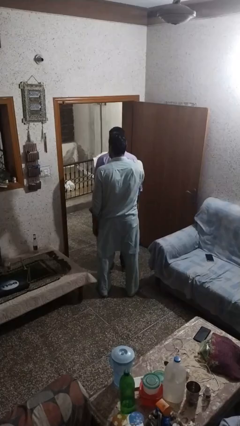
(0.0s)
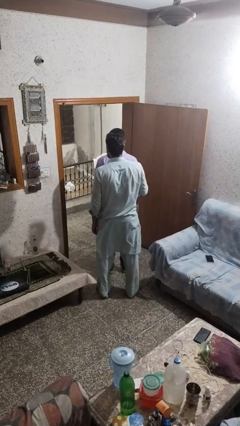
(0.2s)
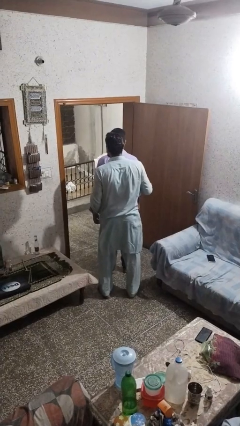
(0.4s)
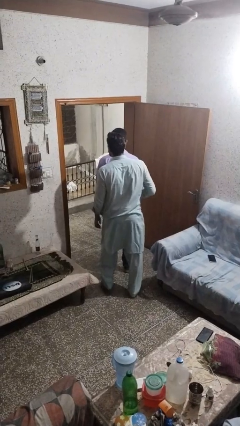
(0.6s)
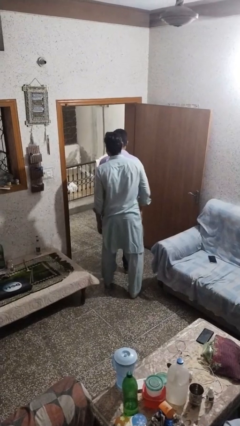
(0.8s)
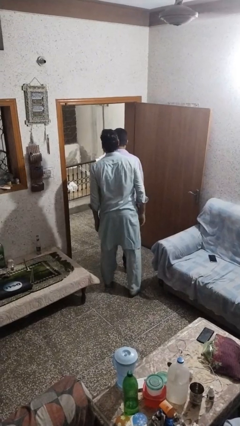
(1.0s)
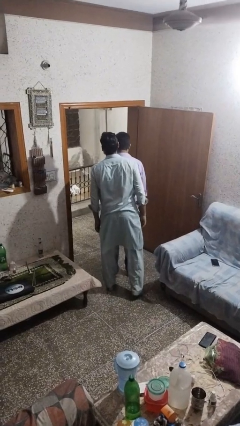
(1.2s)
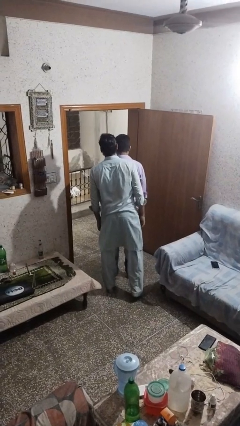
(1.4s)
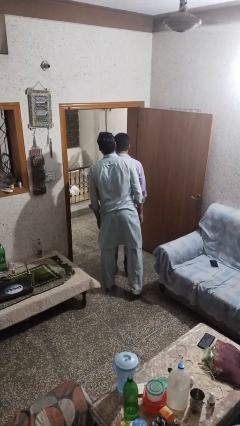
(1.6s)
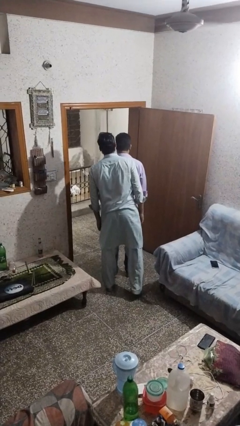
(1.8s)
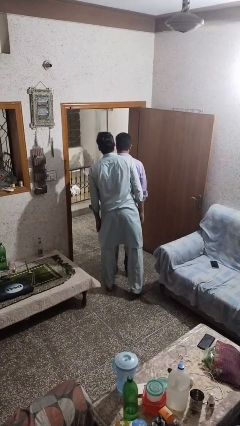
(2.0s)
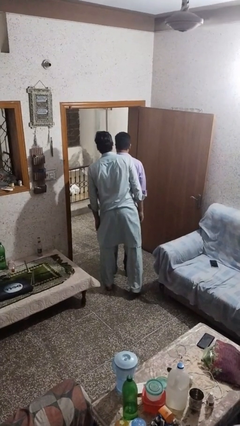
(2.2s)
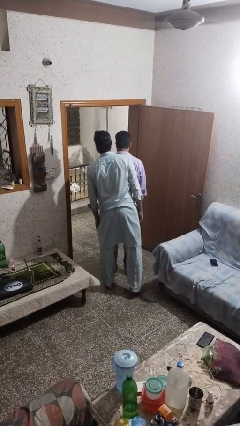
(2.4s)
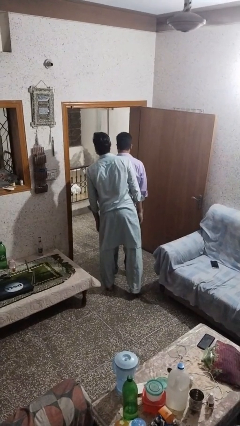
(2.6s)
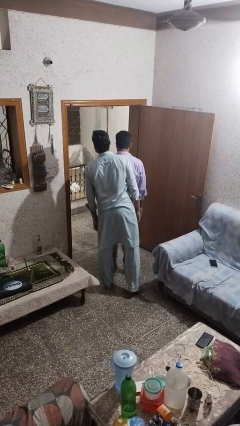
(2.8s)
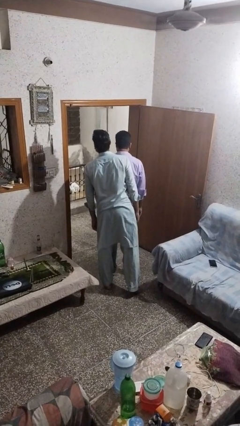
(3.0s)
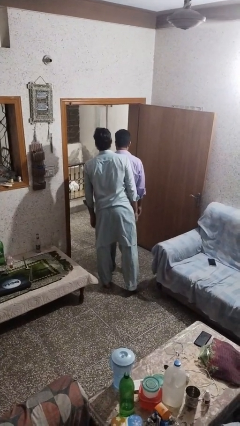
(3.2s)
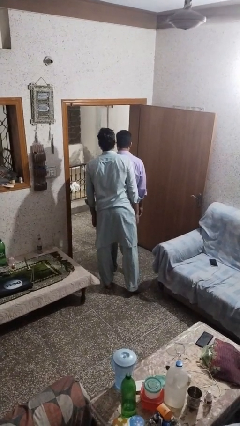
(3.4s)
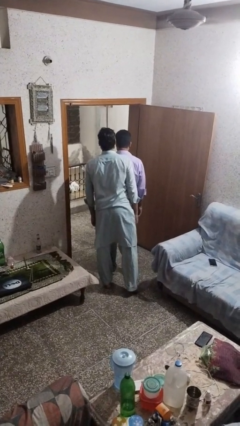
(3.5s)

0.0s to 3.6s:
person looks over shoulder

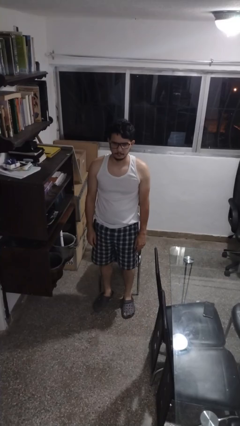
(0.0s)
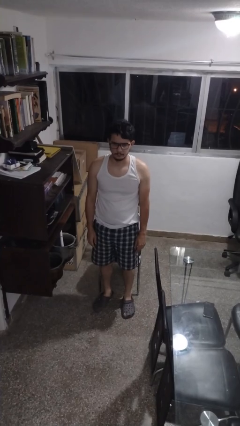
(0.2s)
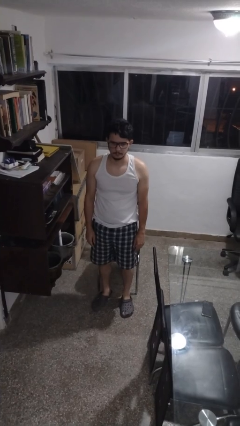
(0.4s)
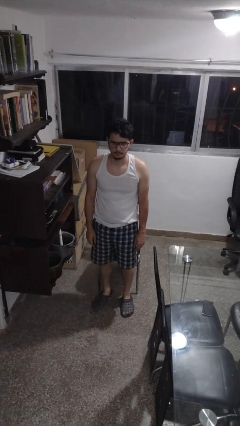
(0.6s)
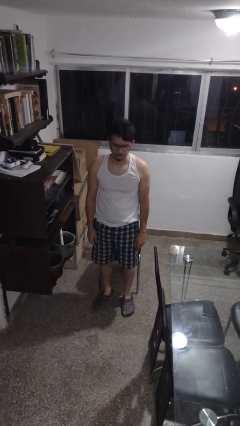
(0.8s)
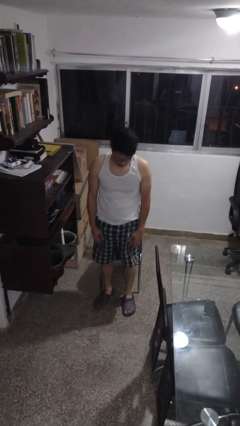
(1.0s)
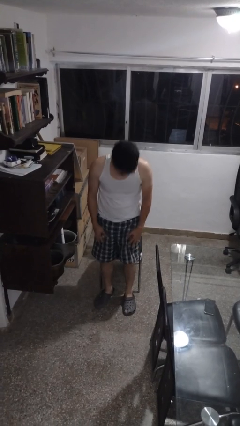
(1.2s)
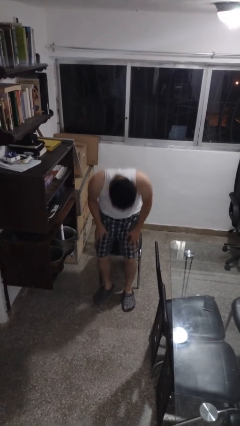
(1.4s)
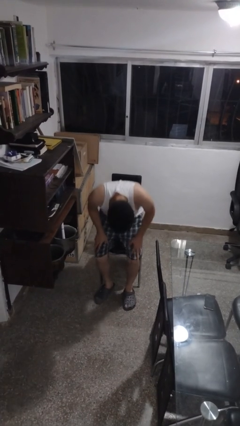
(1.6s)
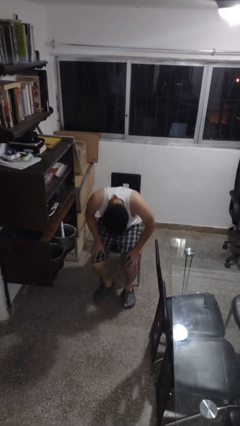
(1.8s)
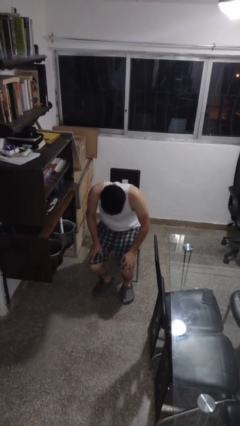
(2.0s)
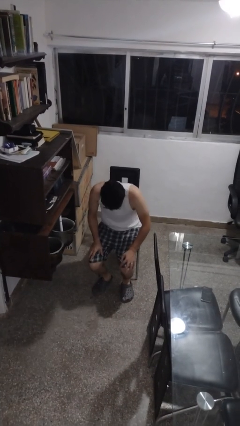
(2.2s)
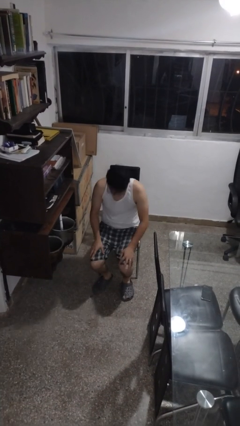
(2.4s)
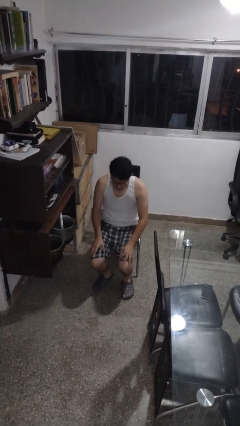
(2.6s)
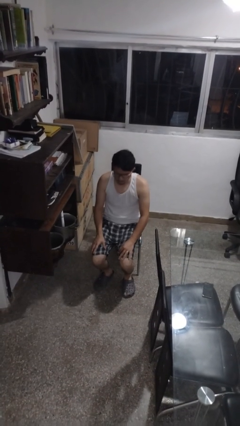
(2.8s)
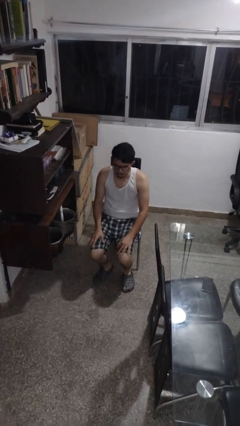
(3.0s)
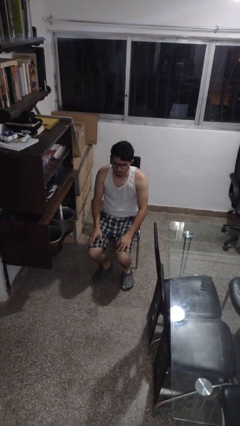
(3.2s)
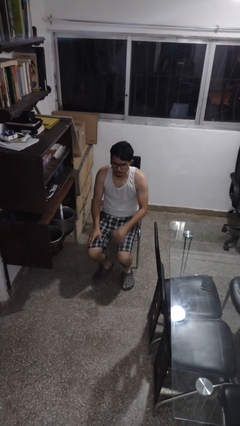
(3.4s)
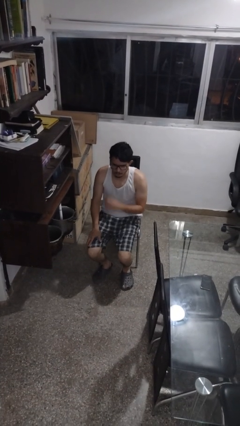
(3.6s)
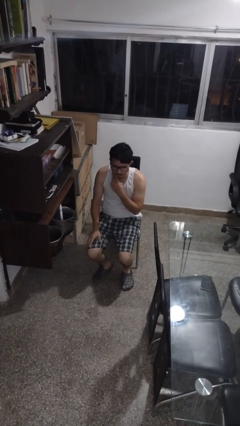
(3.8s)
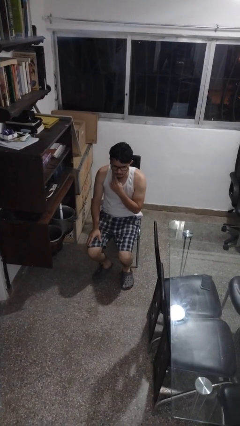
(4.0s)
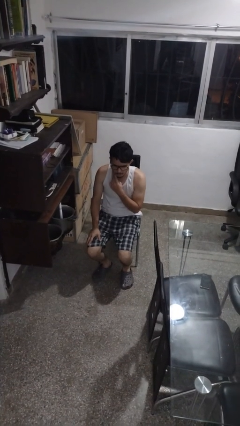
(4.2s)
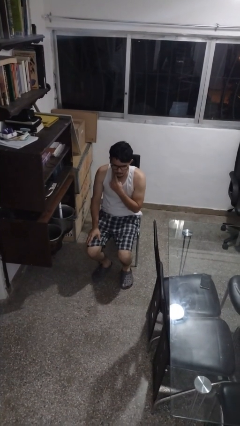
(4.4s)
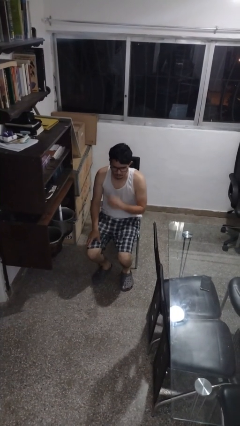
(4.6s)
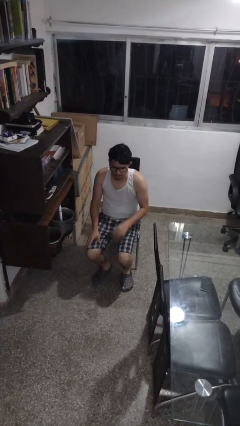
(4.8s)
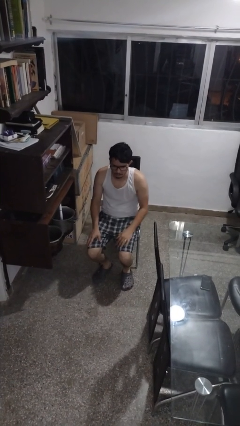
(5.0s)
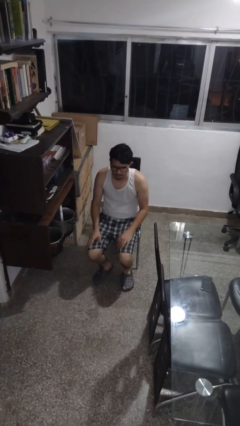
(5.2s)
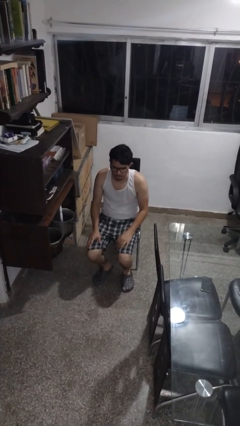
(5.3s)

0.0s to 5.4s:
person sits down

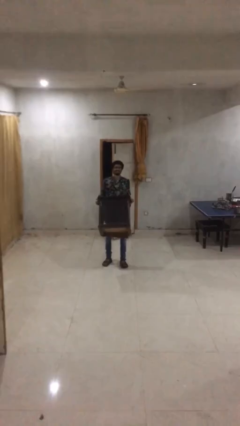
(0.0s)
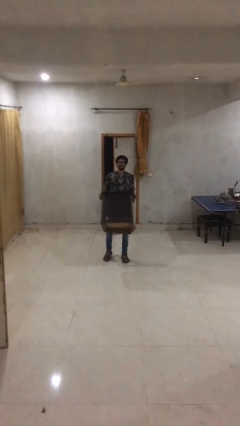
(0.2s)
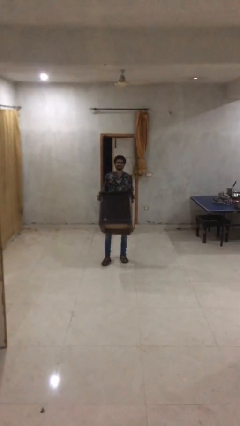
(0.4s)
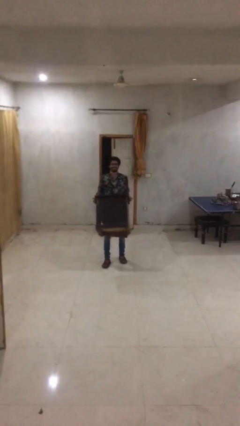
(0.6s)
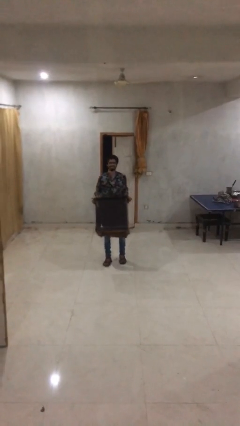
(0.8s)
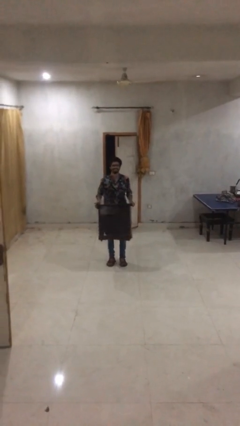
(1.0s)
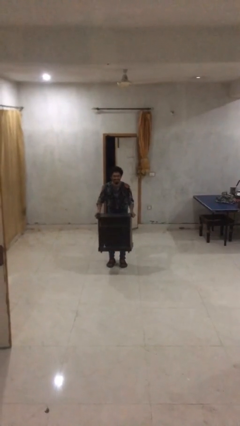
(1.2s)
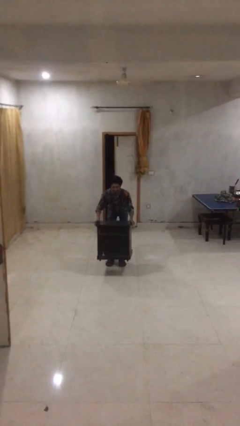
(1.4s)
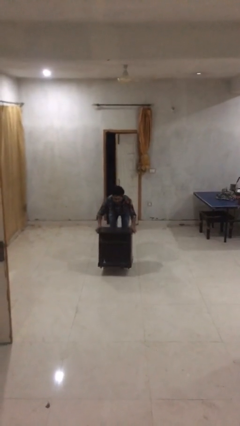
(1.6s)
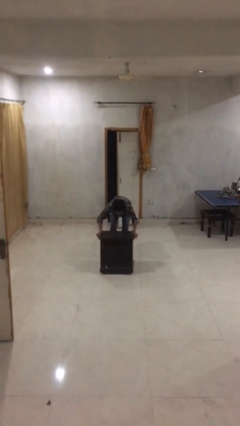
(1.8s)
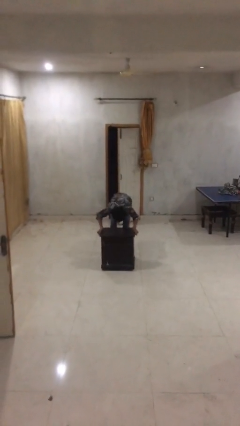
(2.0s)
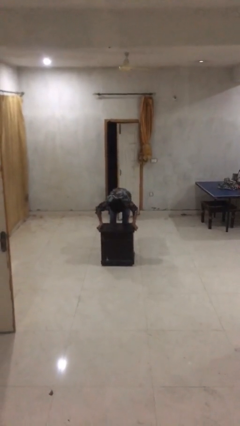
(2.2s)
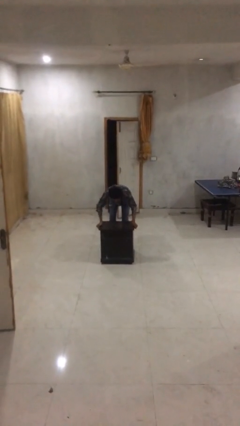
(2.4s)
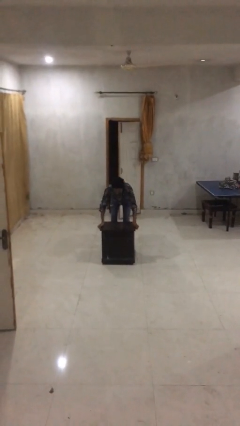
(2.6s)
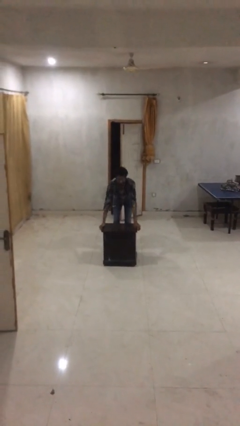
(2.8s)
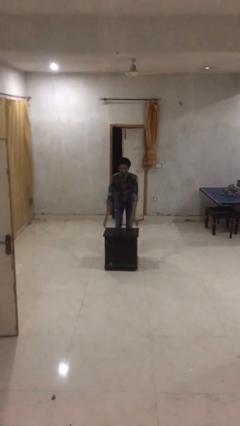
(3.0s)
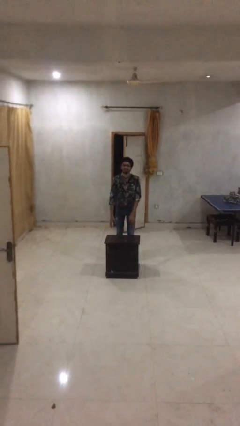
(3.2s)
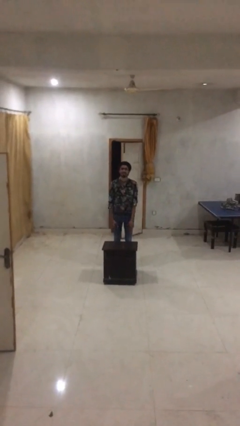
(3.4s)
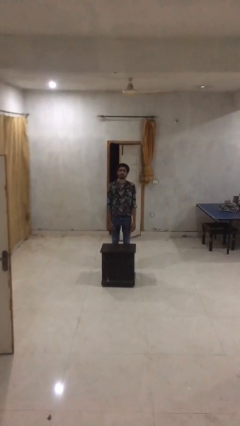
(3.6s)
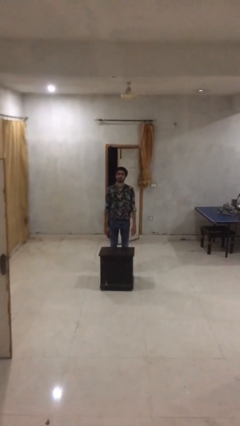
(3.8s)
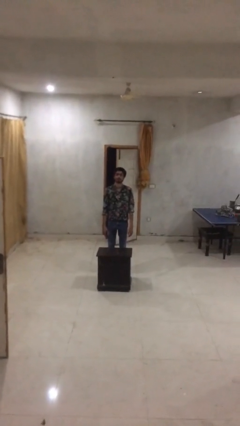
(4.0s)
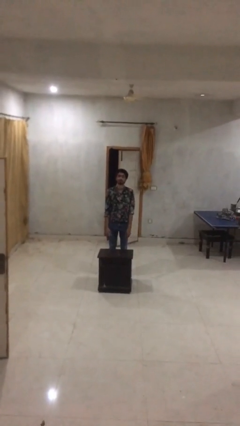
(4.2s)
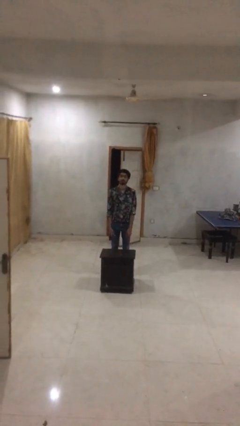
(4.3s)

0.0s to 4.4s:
person puts down object on floor

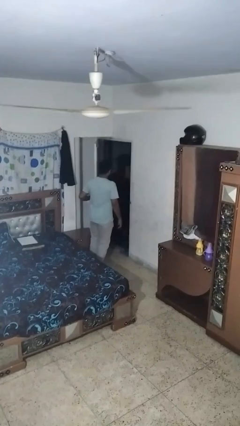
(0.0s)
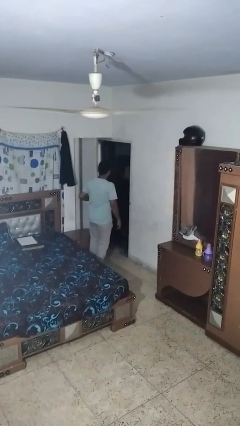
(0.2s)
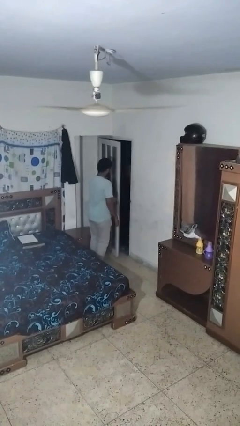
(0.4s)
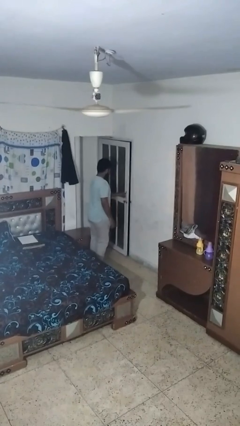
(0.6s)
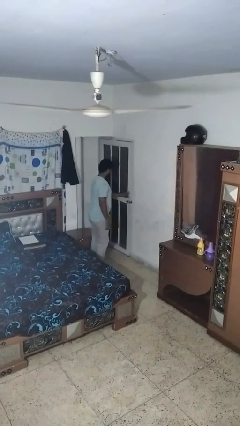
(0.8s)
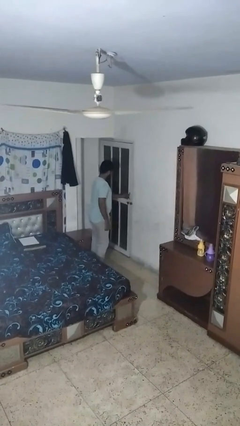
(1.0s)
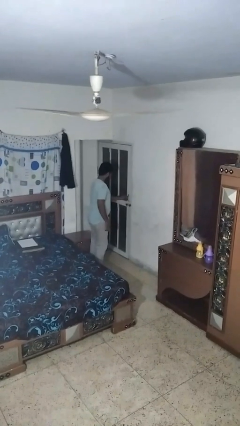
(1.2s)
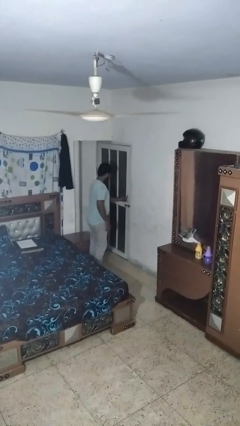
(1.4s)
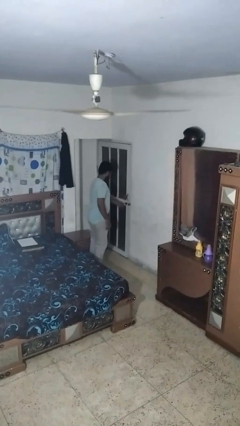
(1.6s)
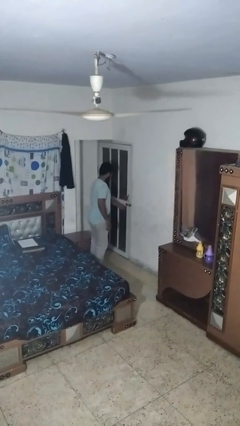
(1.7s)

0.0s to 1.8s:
person closes facility door

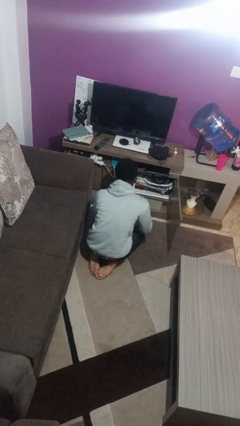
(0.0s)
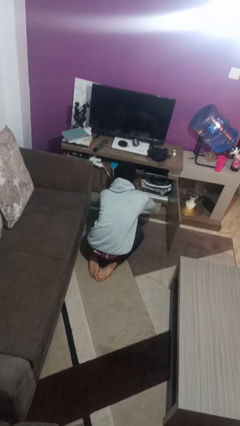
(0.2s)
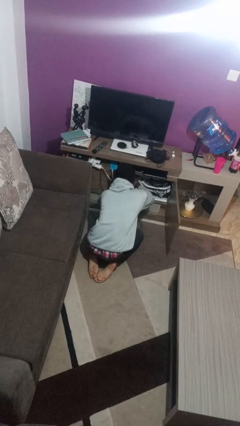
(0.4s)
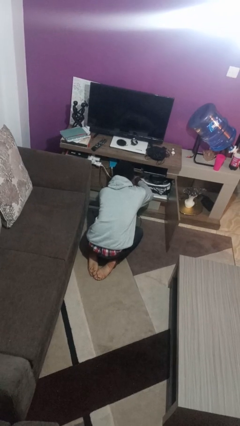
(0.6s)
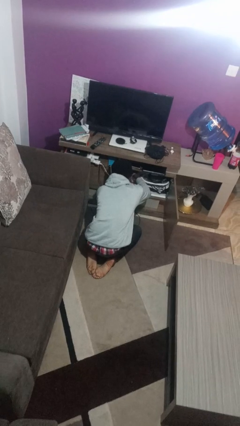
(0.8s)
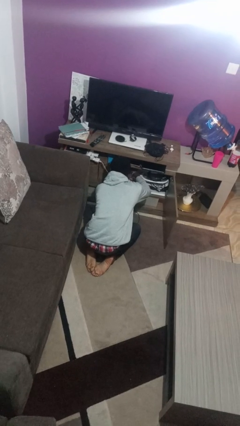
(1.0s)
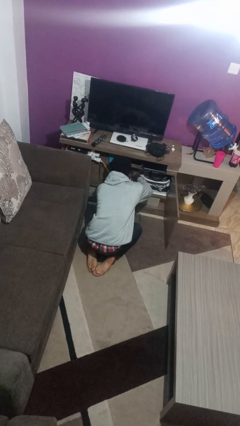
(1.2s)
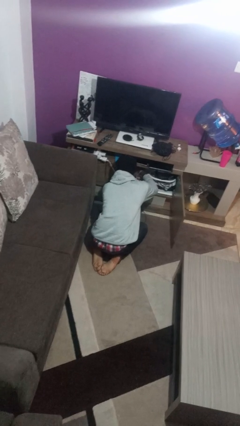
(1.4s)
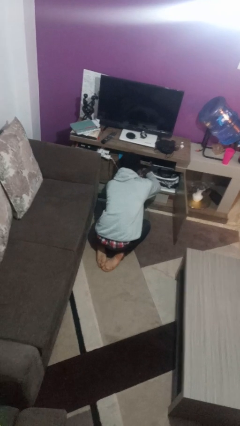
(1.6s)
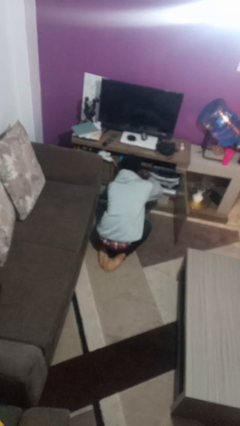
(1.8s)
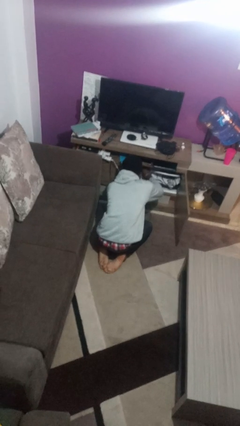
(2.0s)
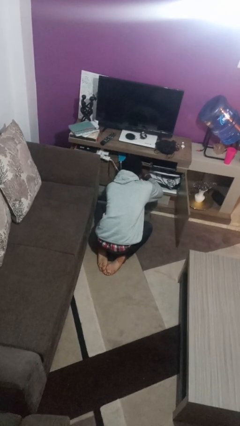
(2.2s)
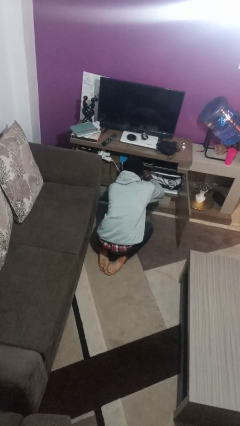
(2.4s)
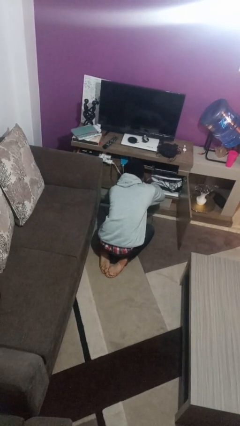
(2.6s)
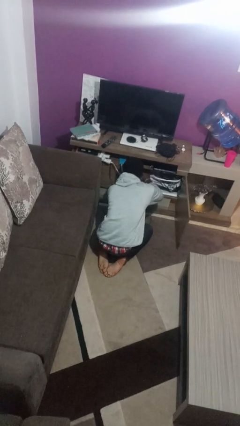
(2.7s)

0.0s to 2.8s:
person searches in cabinet
